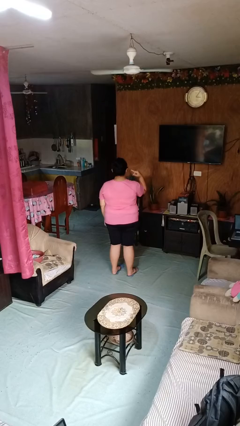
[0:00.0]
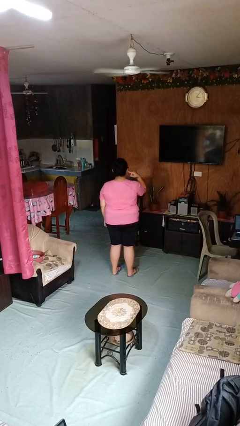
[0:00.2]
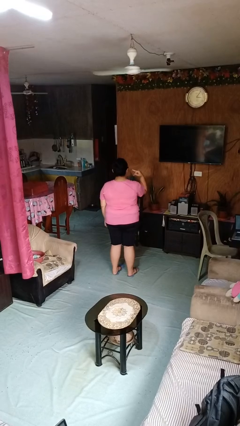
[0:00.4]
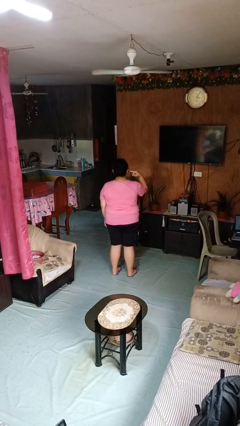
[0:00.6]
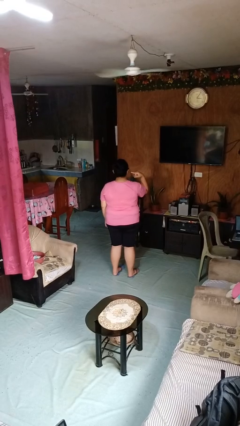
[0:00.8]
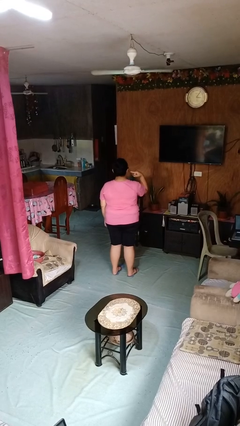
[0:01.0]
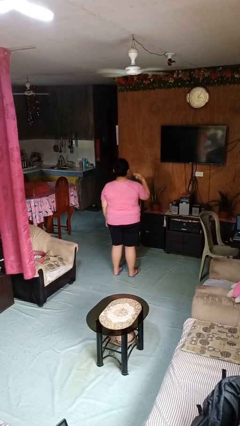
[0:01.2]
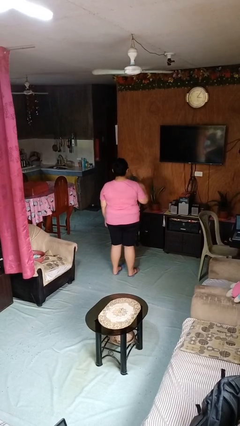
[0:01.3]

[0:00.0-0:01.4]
person gestures listen closely

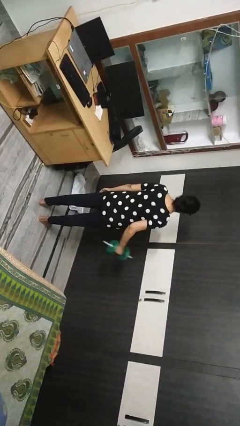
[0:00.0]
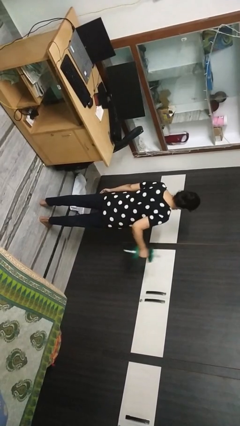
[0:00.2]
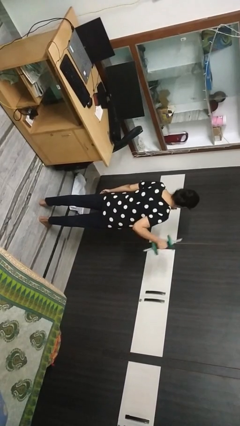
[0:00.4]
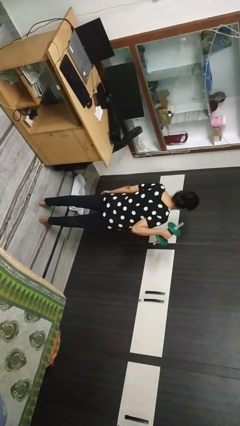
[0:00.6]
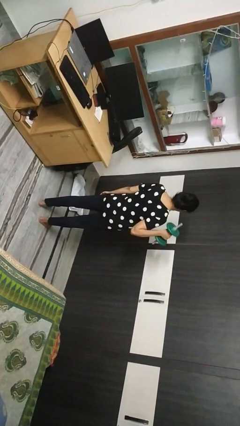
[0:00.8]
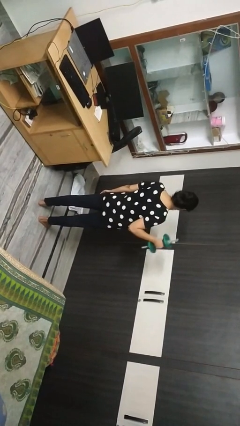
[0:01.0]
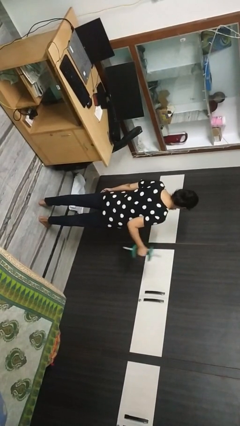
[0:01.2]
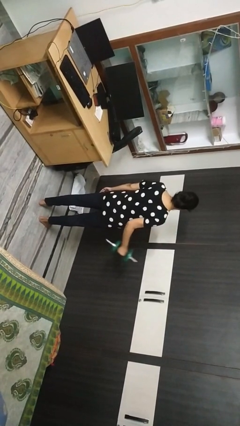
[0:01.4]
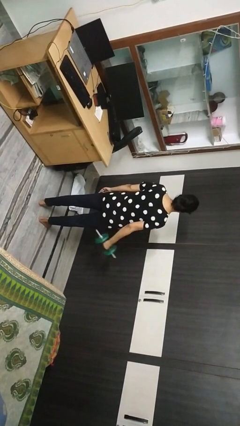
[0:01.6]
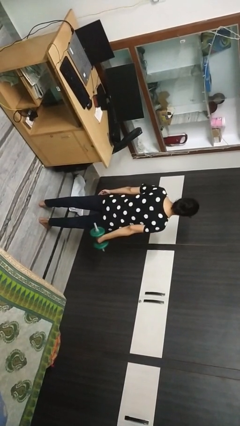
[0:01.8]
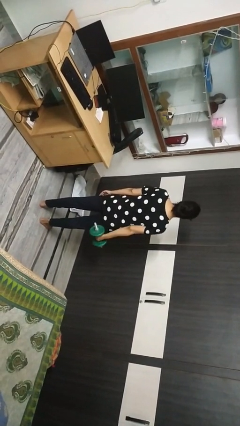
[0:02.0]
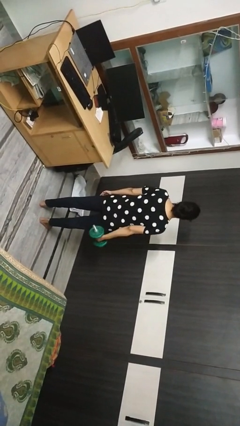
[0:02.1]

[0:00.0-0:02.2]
person lifts dumbbells

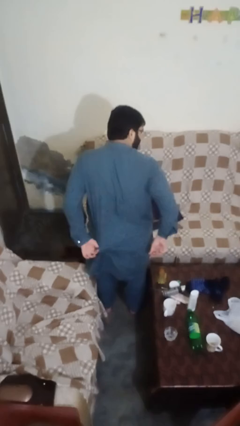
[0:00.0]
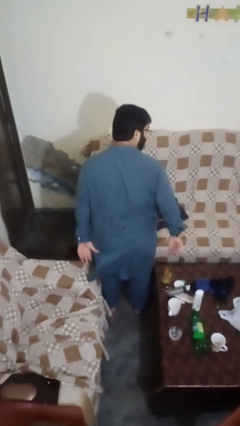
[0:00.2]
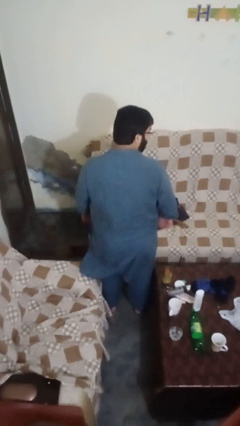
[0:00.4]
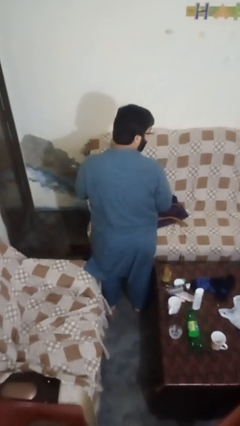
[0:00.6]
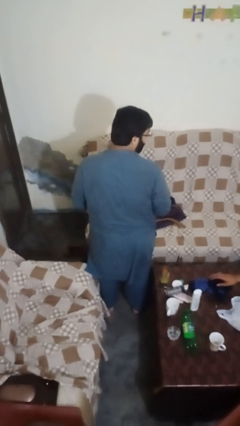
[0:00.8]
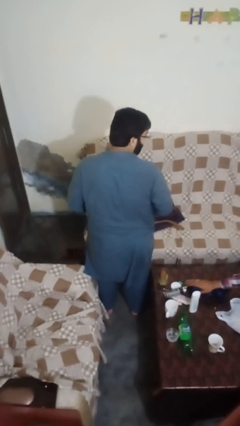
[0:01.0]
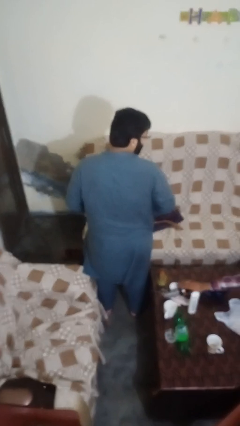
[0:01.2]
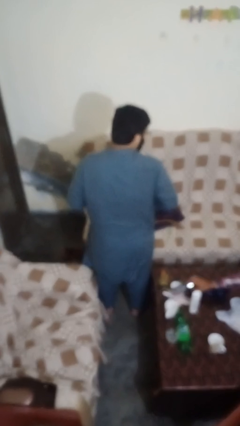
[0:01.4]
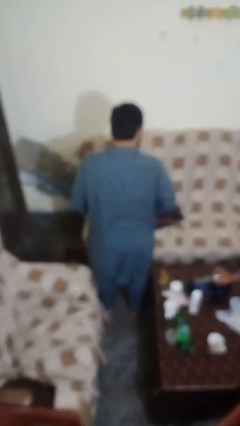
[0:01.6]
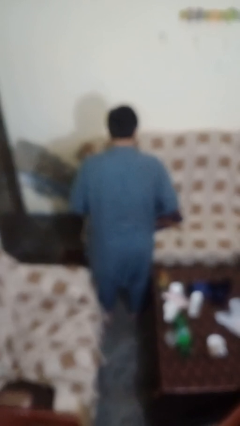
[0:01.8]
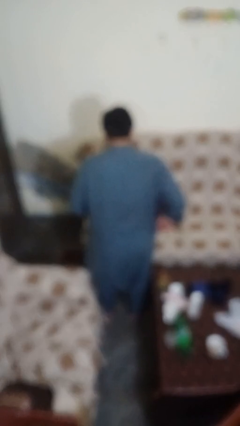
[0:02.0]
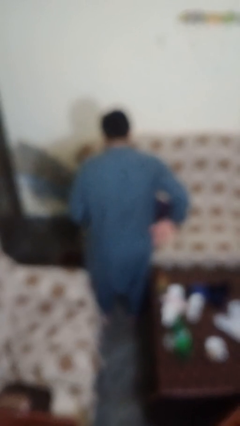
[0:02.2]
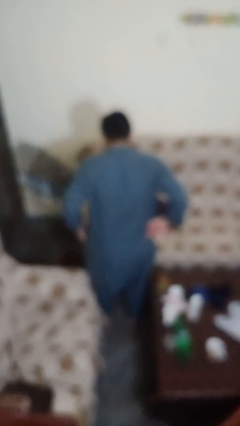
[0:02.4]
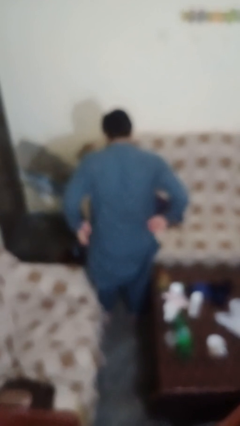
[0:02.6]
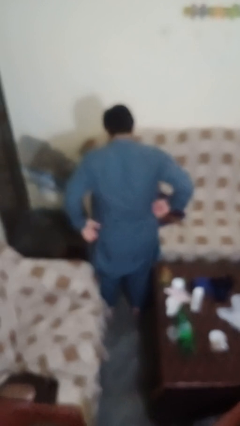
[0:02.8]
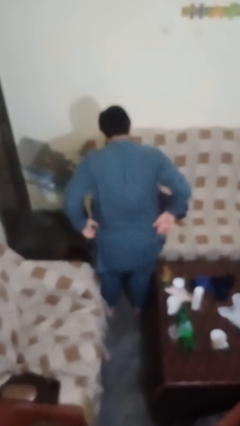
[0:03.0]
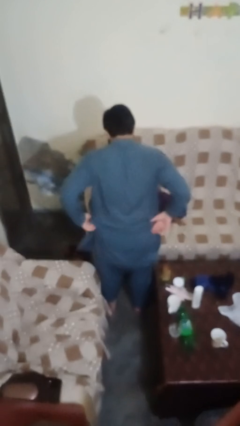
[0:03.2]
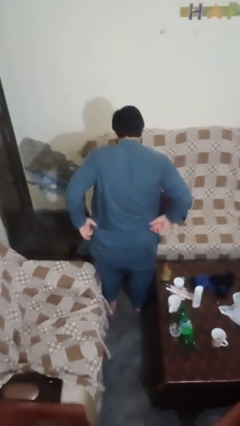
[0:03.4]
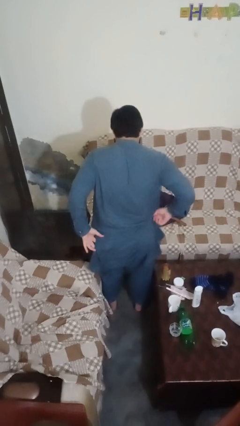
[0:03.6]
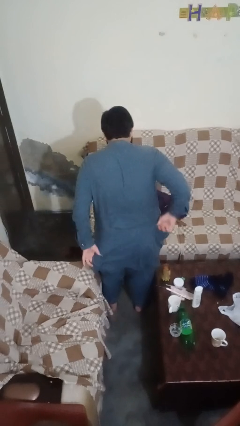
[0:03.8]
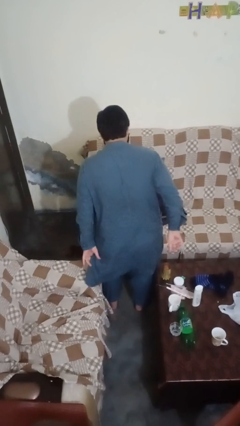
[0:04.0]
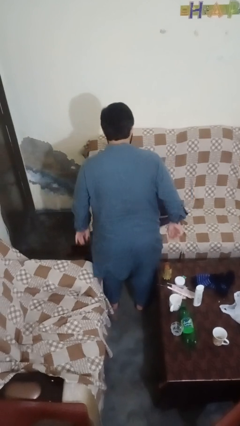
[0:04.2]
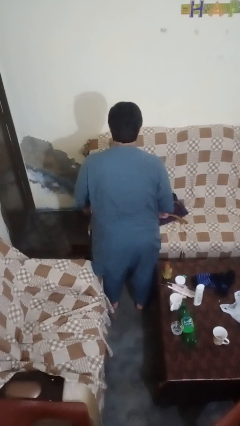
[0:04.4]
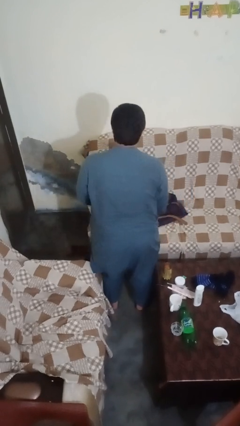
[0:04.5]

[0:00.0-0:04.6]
person hikes up pants

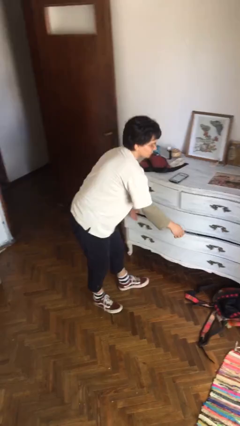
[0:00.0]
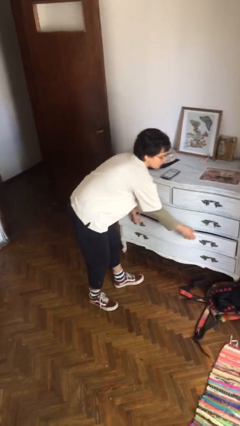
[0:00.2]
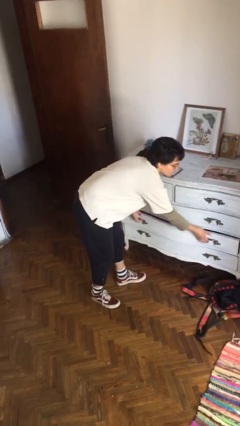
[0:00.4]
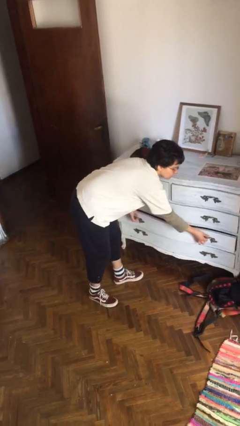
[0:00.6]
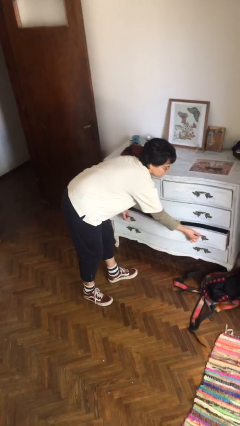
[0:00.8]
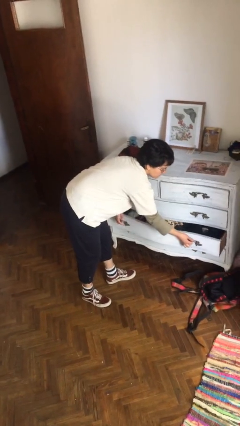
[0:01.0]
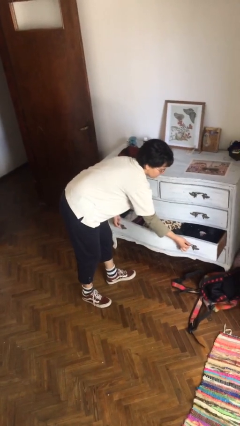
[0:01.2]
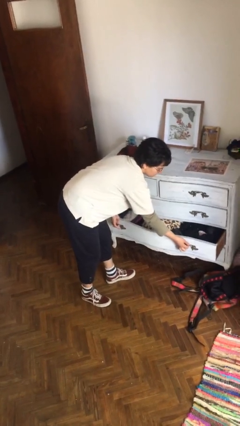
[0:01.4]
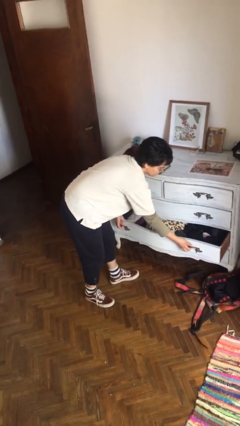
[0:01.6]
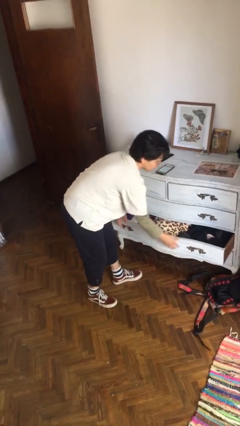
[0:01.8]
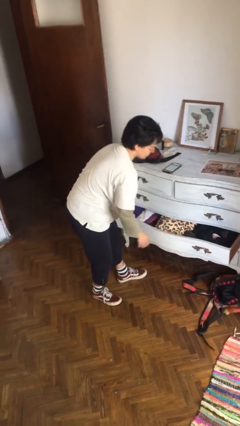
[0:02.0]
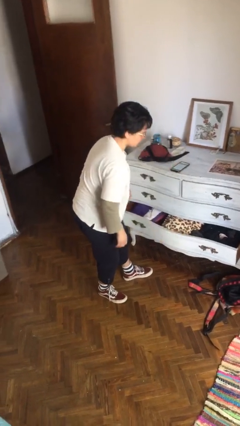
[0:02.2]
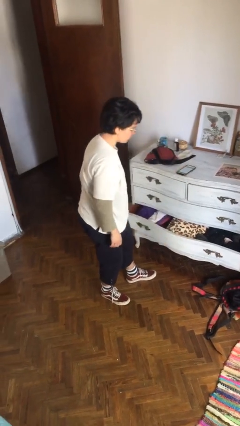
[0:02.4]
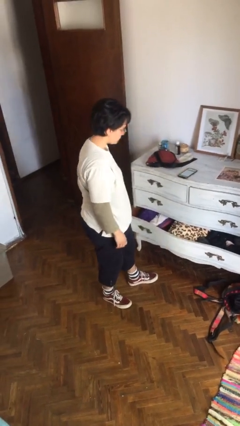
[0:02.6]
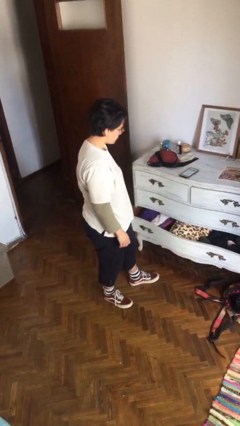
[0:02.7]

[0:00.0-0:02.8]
person opens dresser drawer

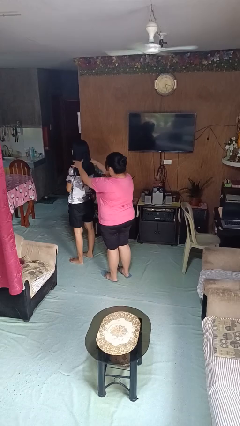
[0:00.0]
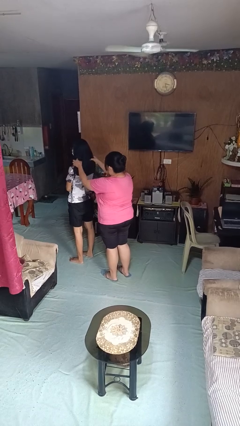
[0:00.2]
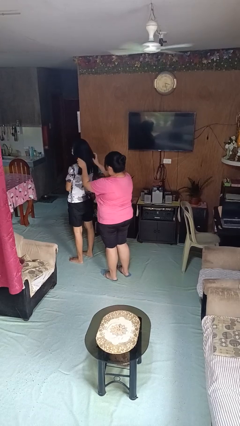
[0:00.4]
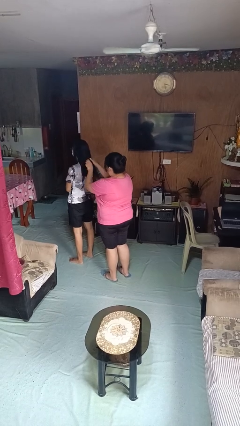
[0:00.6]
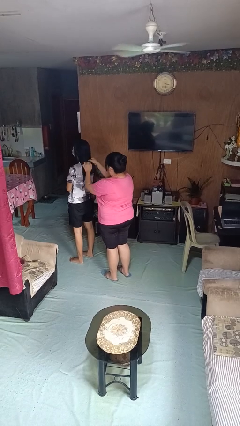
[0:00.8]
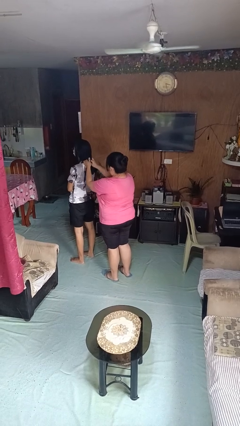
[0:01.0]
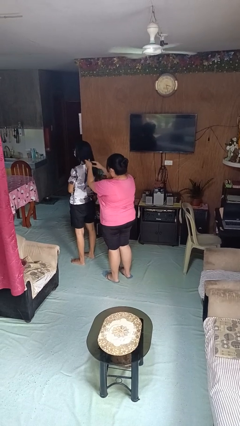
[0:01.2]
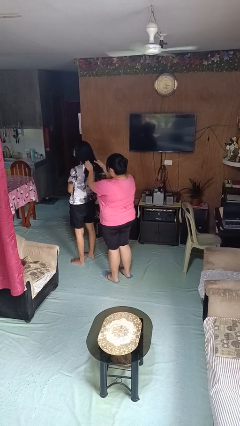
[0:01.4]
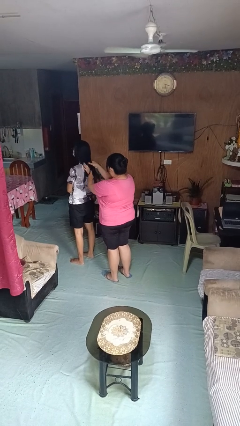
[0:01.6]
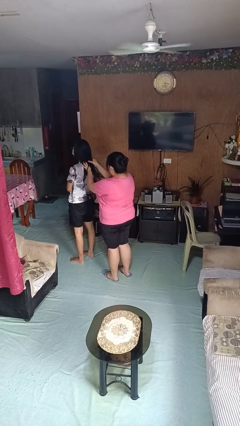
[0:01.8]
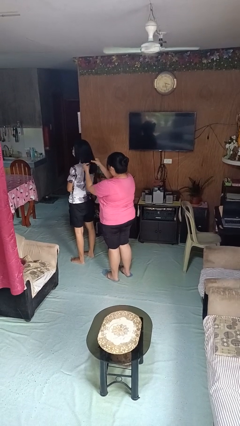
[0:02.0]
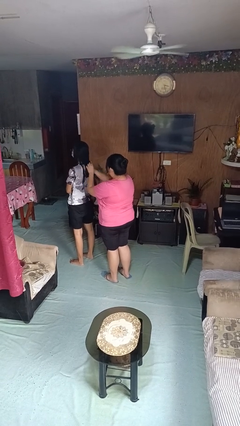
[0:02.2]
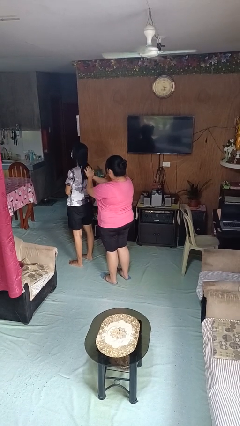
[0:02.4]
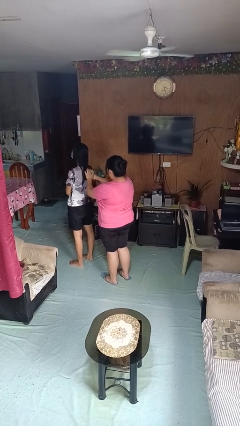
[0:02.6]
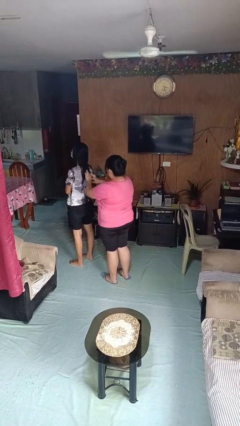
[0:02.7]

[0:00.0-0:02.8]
person braids hair of person

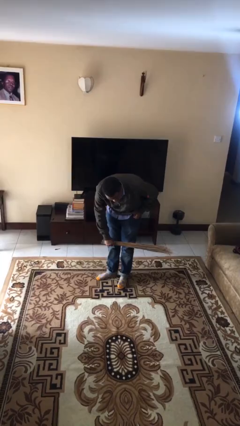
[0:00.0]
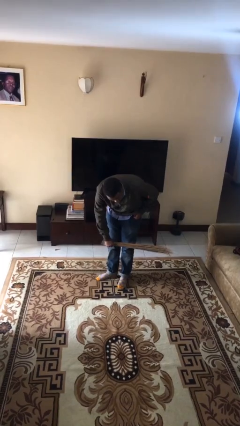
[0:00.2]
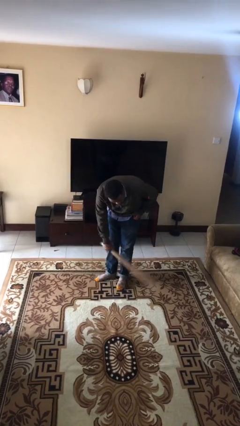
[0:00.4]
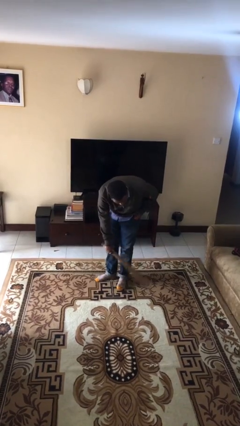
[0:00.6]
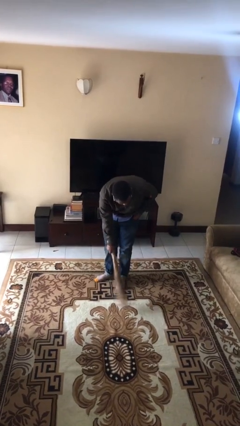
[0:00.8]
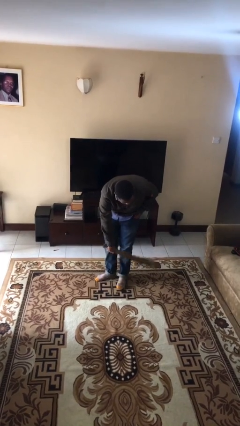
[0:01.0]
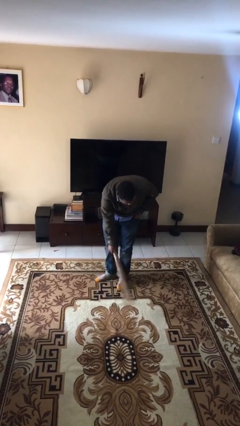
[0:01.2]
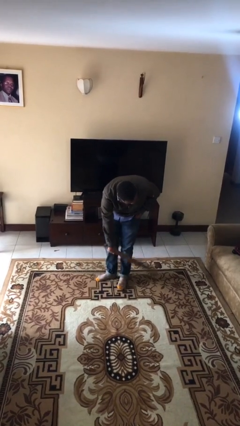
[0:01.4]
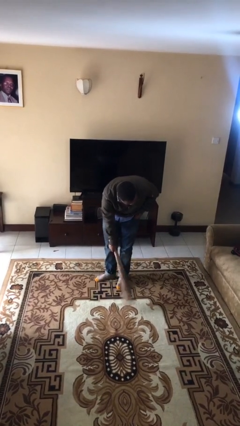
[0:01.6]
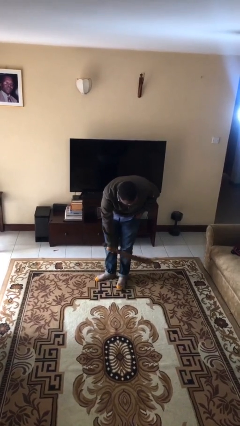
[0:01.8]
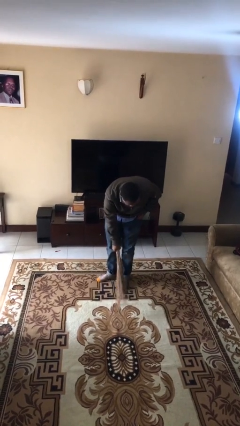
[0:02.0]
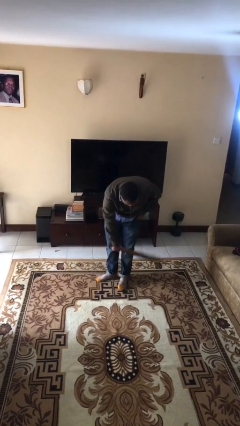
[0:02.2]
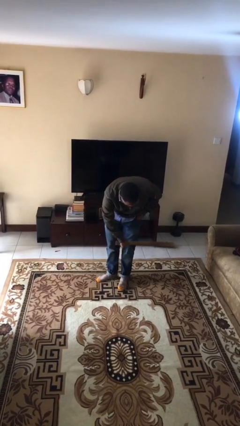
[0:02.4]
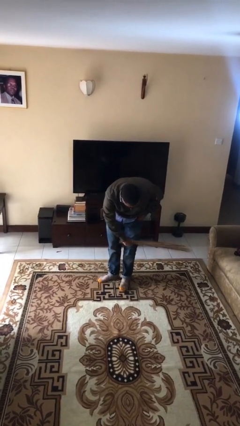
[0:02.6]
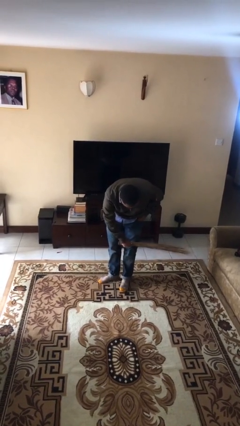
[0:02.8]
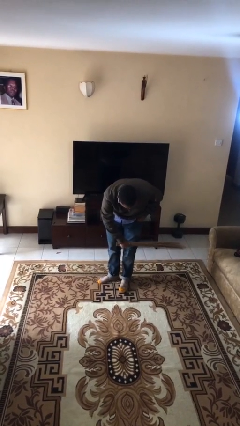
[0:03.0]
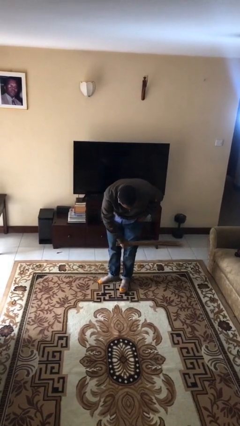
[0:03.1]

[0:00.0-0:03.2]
person sweeps floor
